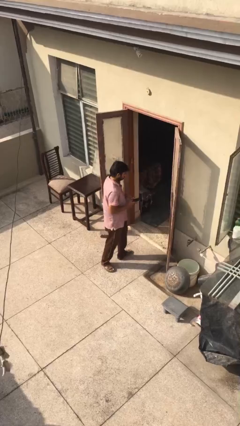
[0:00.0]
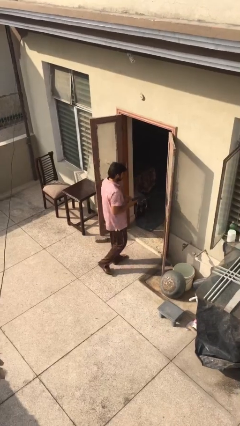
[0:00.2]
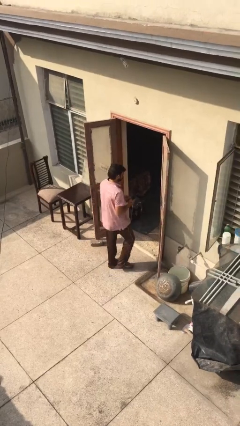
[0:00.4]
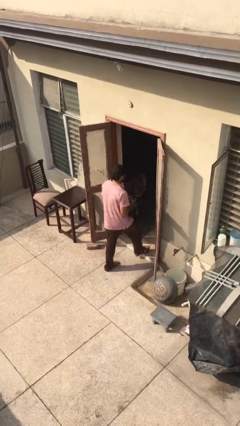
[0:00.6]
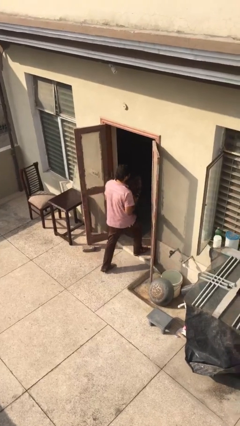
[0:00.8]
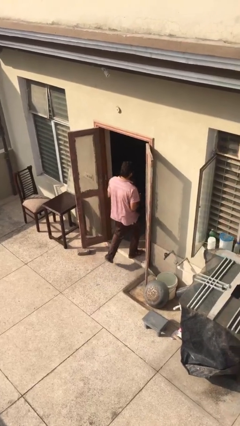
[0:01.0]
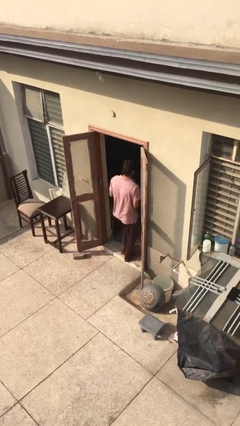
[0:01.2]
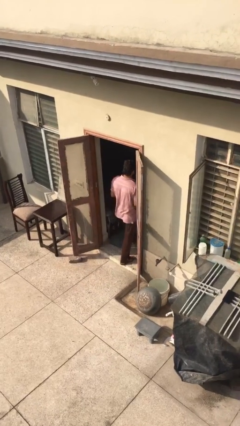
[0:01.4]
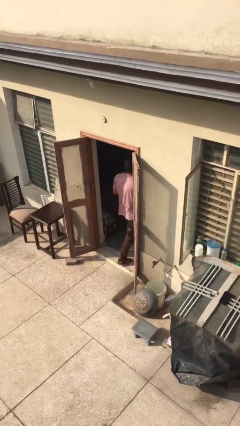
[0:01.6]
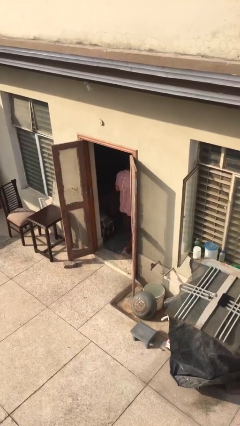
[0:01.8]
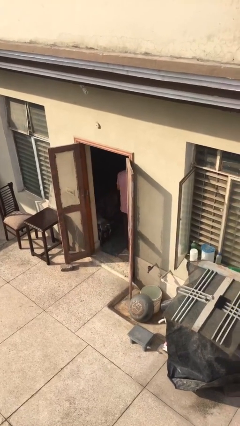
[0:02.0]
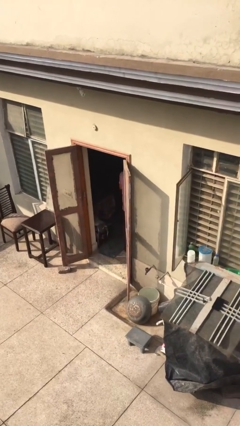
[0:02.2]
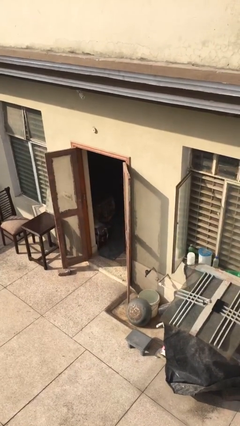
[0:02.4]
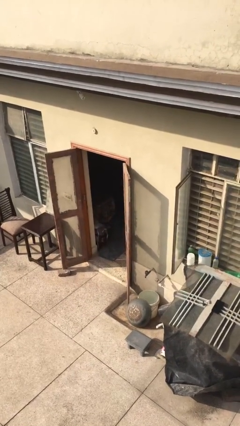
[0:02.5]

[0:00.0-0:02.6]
person exits scene through structure

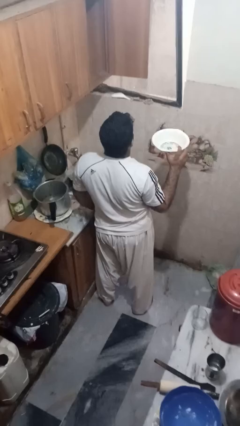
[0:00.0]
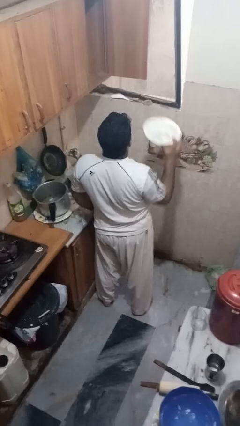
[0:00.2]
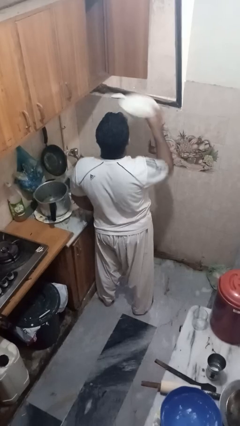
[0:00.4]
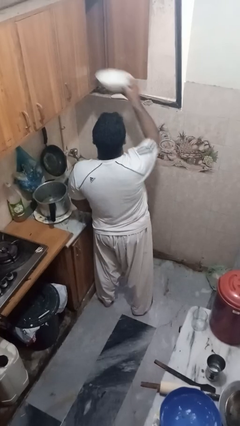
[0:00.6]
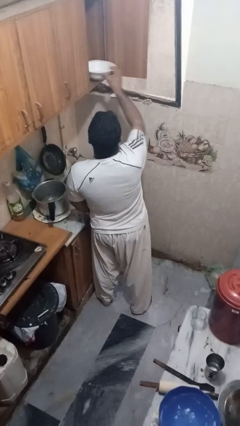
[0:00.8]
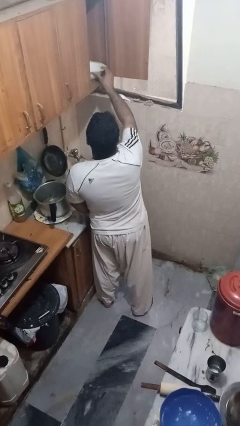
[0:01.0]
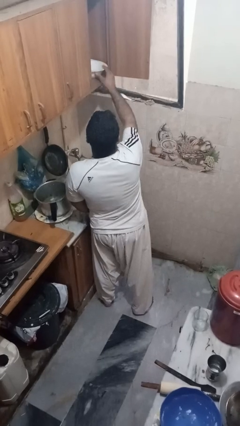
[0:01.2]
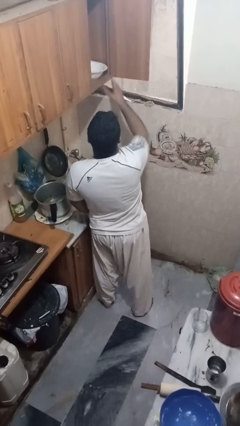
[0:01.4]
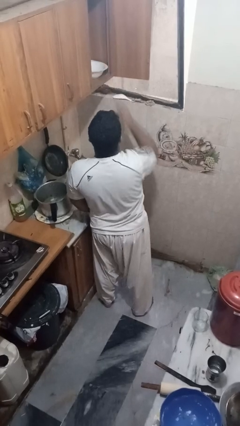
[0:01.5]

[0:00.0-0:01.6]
person puts object in cabinet

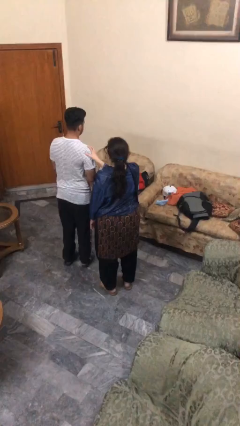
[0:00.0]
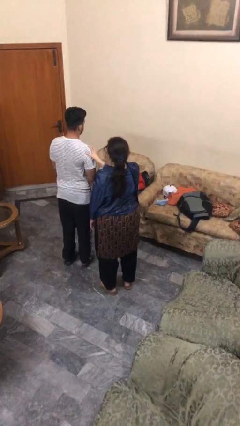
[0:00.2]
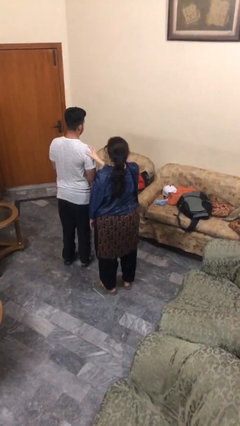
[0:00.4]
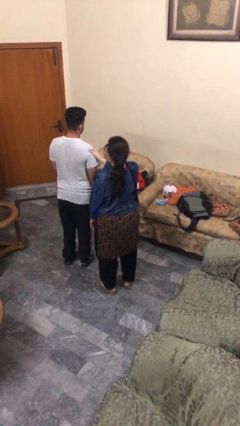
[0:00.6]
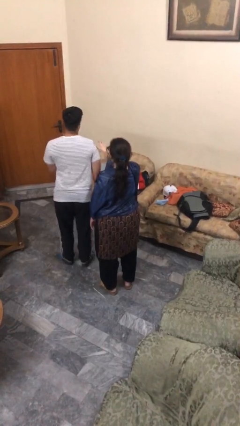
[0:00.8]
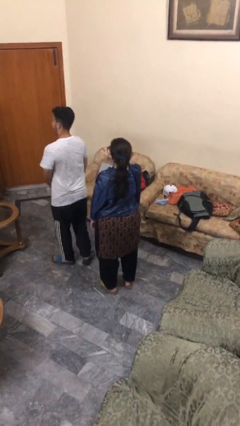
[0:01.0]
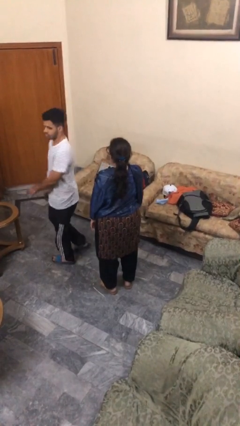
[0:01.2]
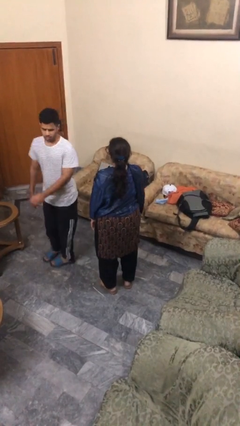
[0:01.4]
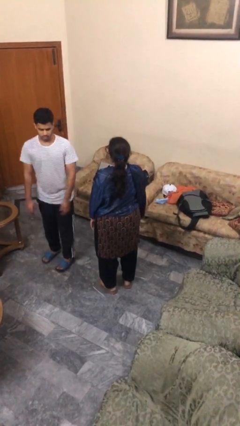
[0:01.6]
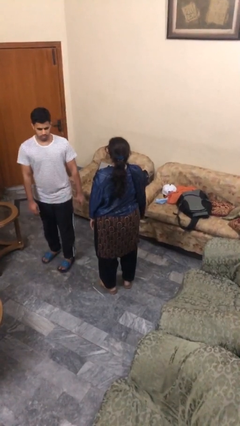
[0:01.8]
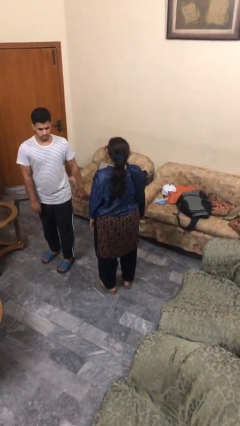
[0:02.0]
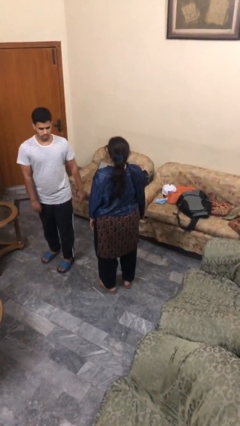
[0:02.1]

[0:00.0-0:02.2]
person spins person around

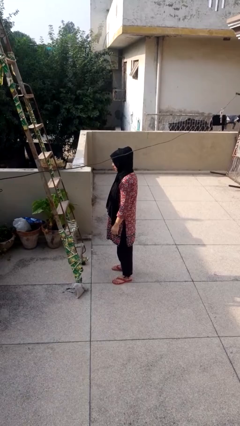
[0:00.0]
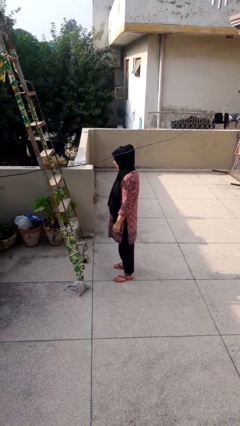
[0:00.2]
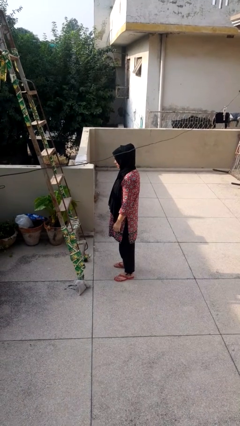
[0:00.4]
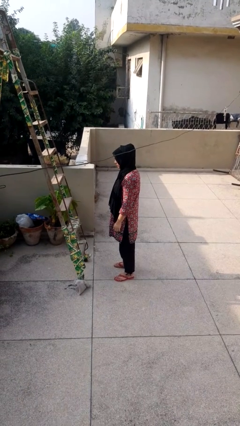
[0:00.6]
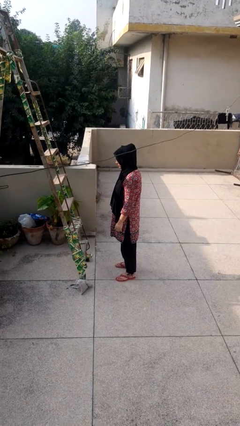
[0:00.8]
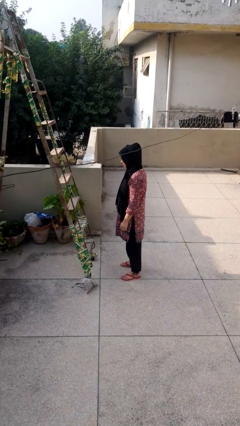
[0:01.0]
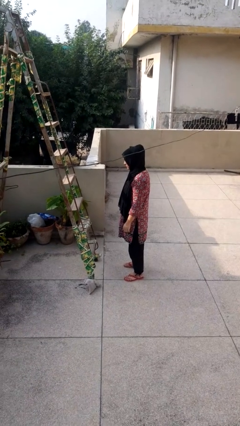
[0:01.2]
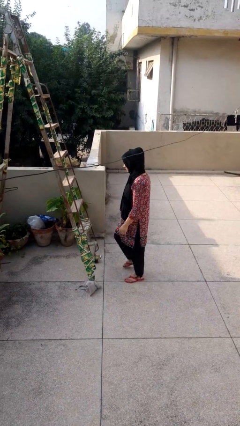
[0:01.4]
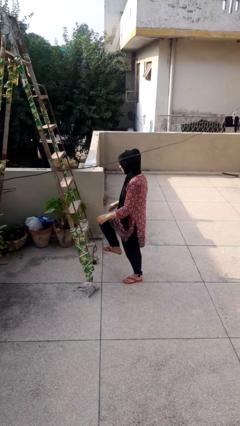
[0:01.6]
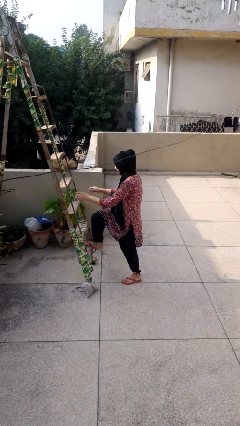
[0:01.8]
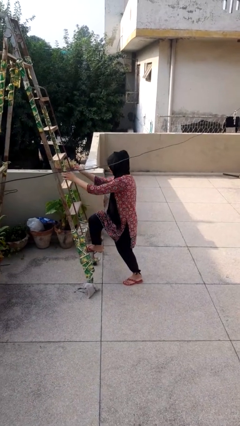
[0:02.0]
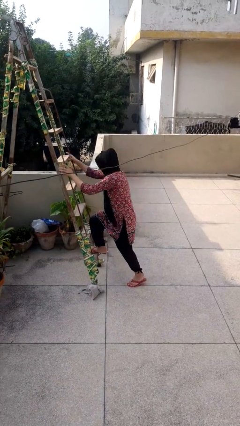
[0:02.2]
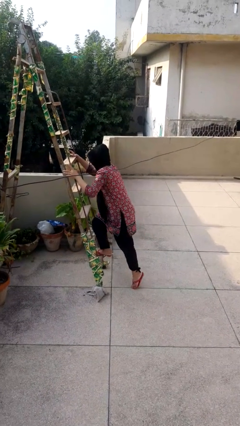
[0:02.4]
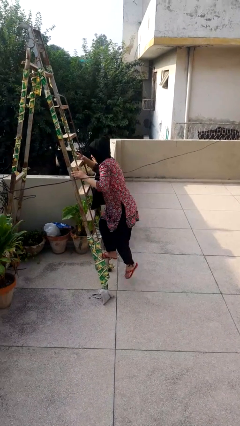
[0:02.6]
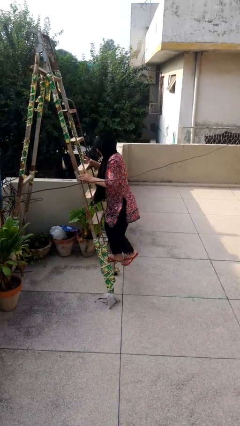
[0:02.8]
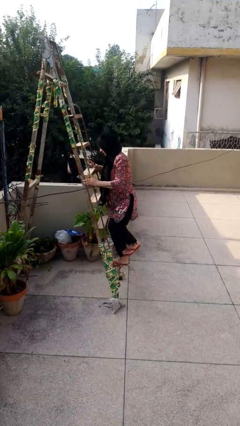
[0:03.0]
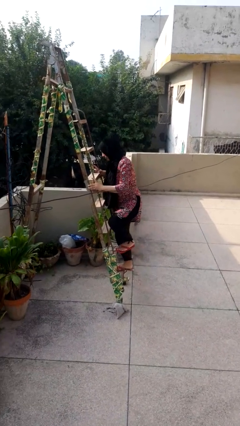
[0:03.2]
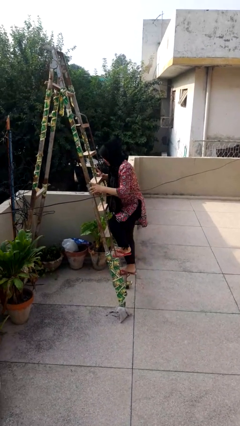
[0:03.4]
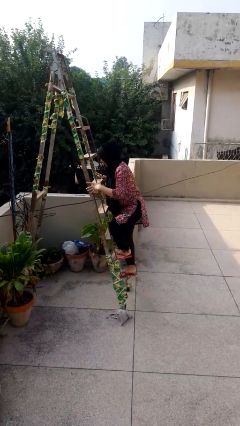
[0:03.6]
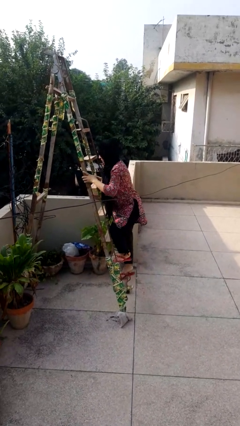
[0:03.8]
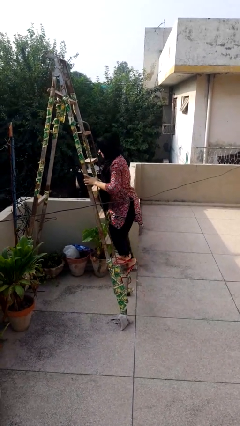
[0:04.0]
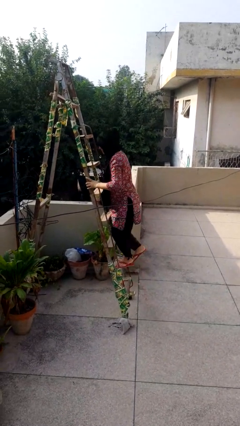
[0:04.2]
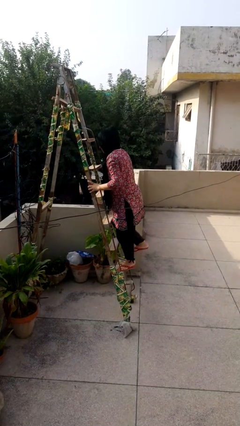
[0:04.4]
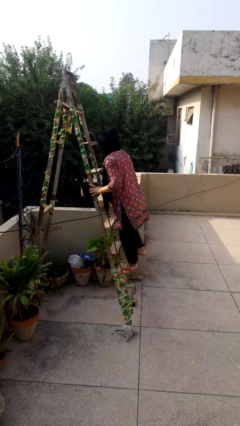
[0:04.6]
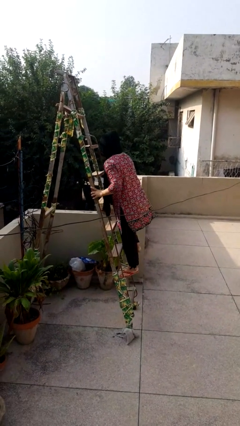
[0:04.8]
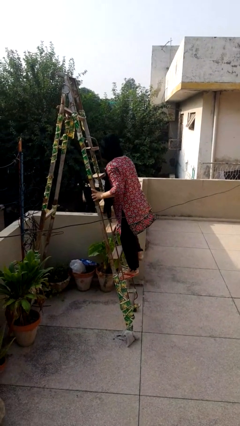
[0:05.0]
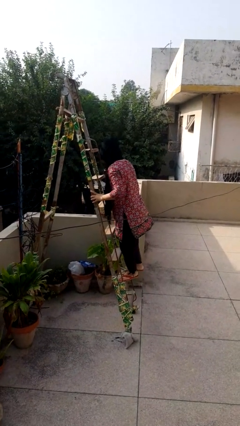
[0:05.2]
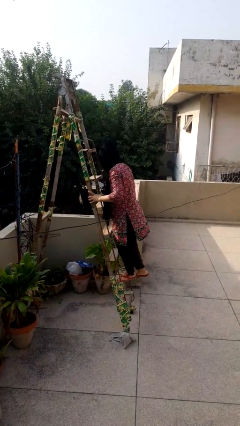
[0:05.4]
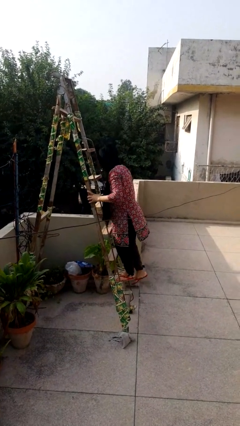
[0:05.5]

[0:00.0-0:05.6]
person climbs up ladder

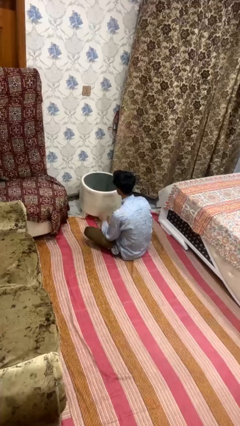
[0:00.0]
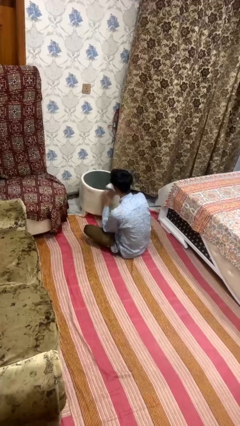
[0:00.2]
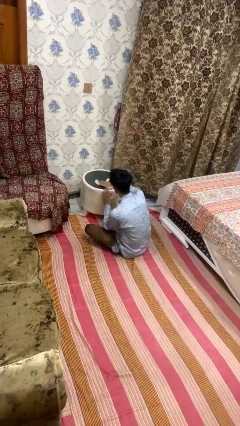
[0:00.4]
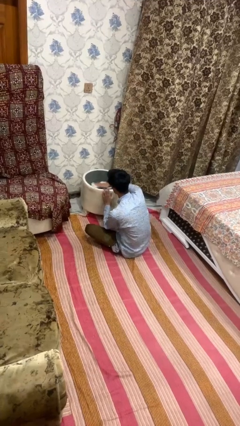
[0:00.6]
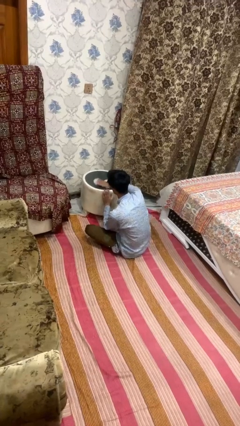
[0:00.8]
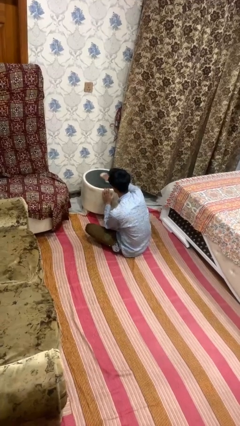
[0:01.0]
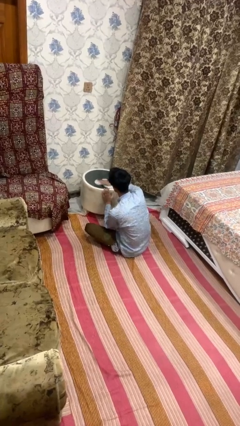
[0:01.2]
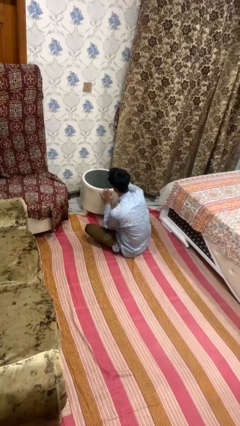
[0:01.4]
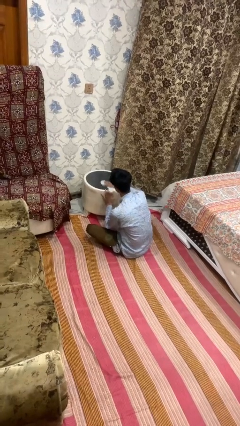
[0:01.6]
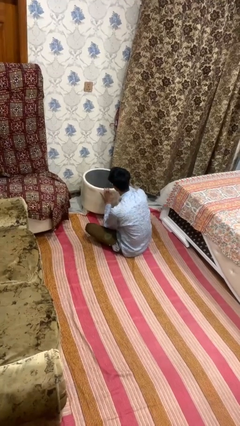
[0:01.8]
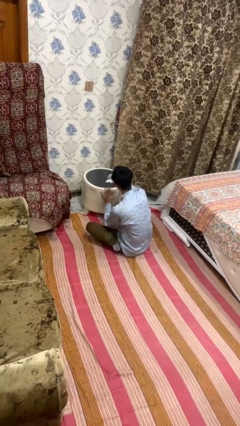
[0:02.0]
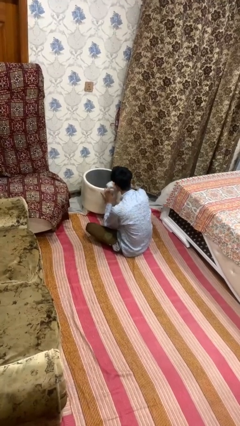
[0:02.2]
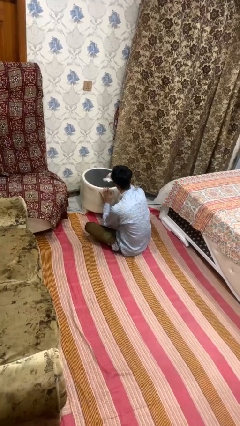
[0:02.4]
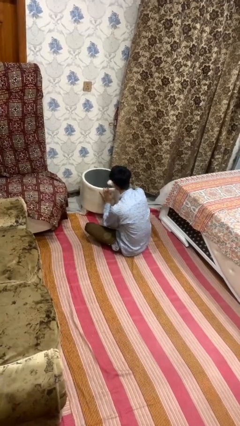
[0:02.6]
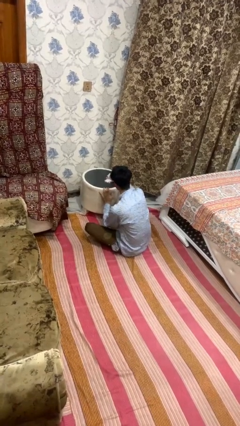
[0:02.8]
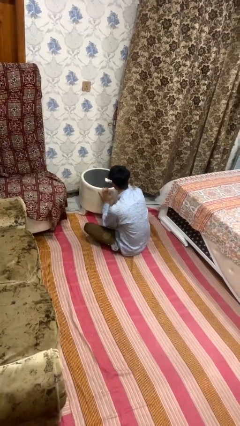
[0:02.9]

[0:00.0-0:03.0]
person cleans table with rag

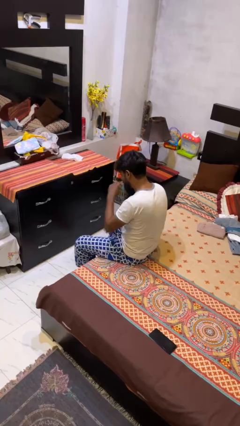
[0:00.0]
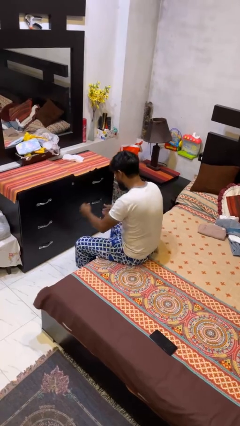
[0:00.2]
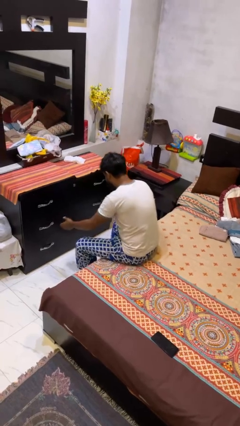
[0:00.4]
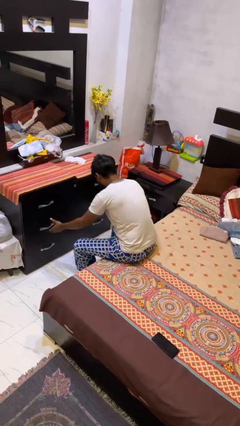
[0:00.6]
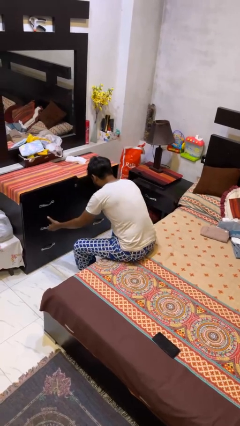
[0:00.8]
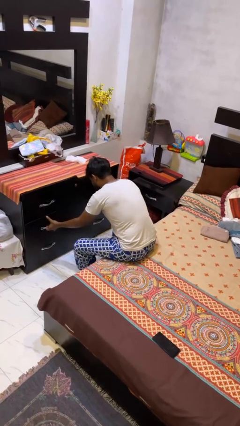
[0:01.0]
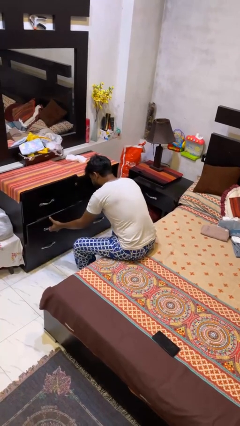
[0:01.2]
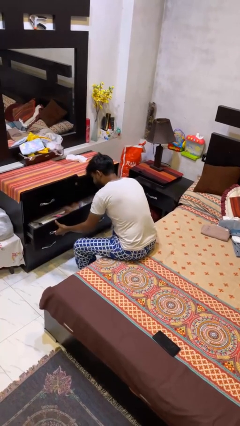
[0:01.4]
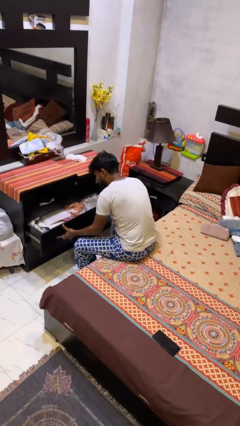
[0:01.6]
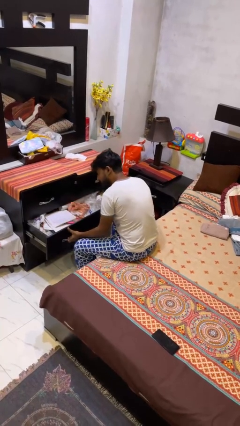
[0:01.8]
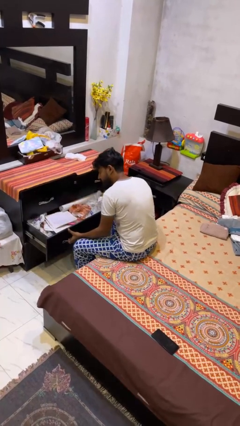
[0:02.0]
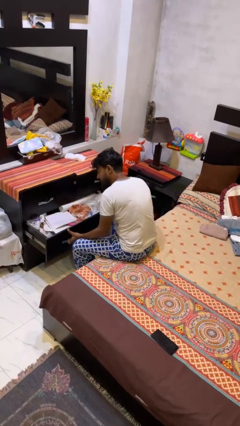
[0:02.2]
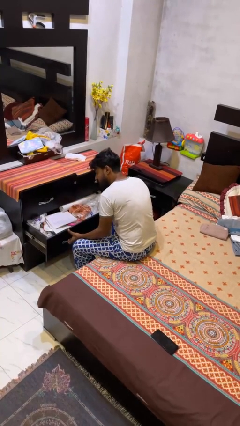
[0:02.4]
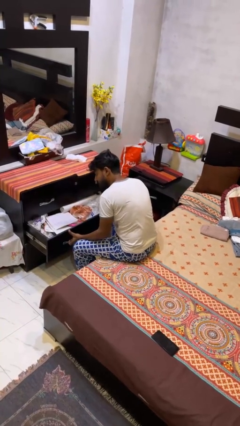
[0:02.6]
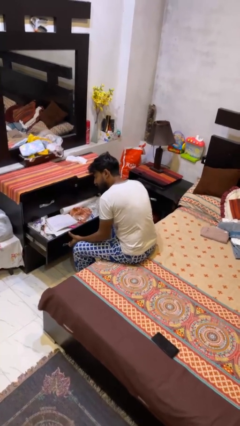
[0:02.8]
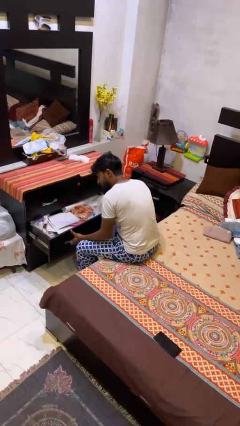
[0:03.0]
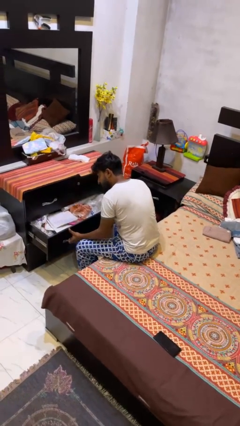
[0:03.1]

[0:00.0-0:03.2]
person opens dresser drawer
